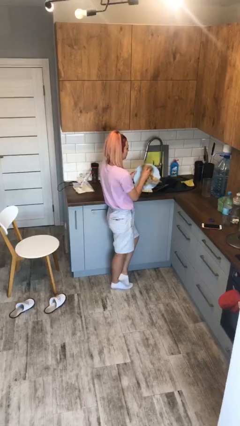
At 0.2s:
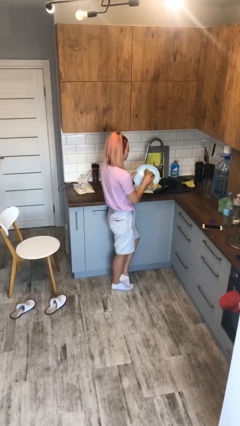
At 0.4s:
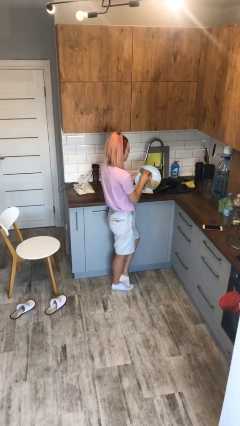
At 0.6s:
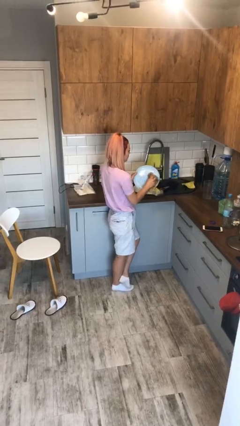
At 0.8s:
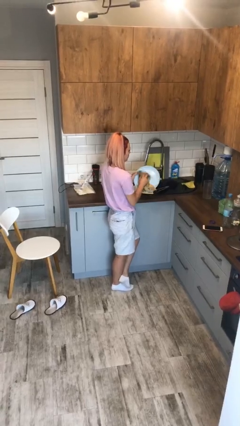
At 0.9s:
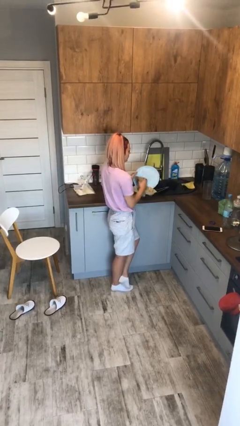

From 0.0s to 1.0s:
person dries dish

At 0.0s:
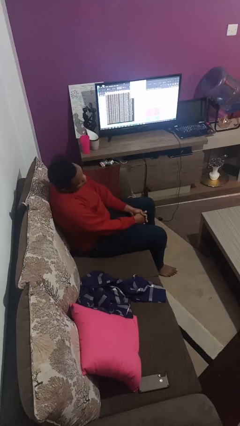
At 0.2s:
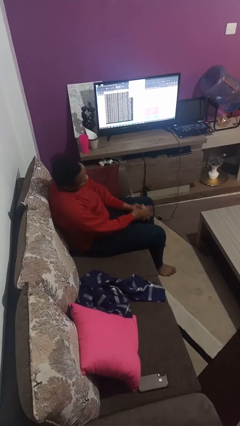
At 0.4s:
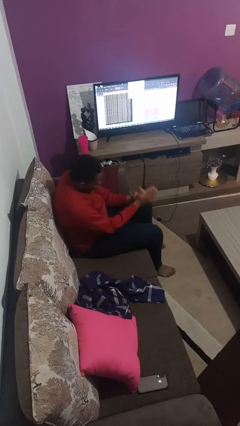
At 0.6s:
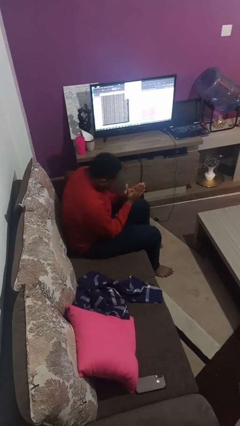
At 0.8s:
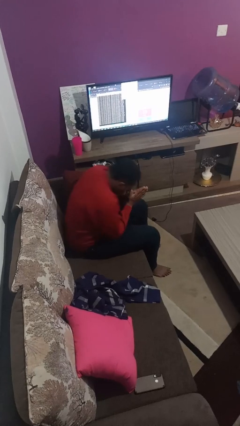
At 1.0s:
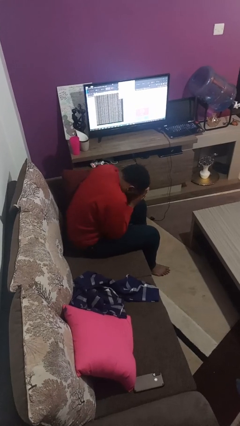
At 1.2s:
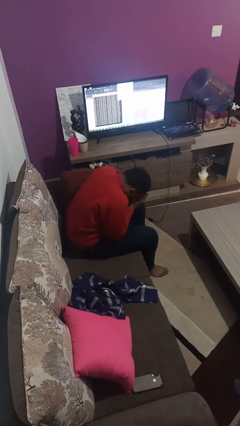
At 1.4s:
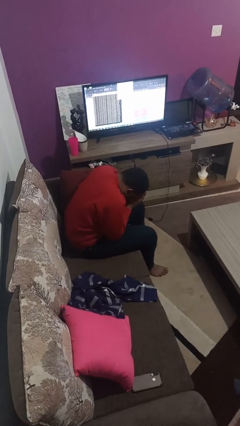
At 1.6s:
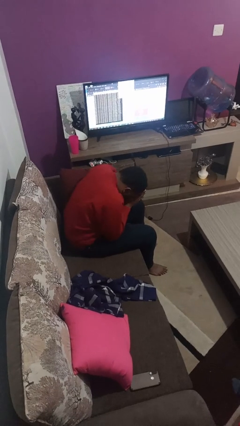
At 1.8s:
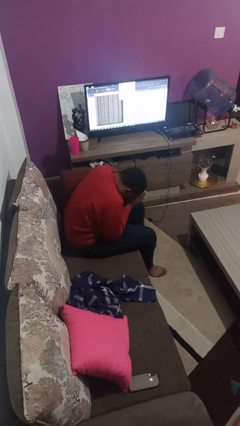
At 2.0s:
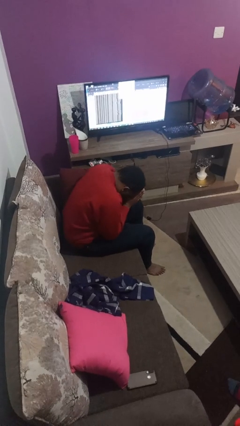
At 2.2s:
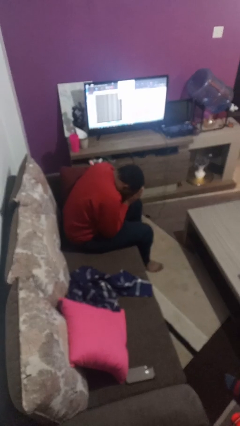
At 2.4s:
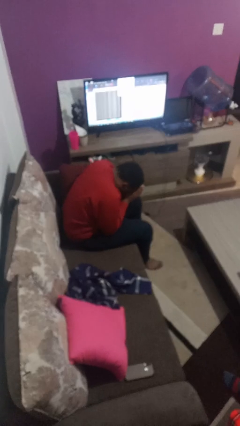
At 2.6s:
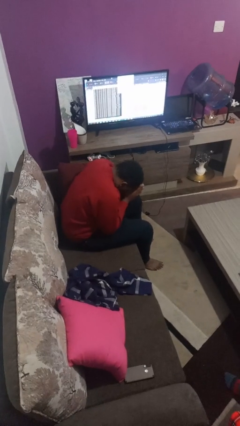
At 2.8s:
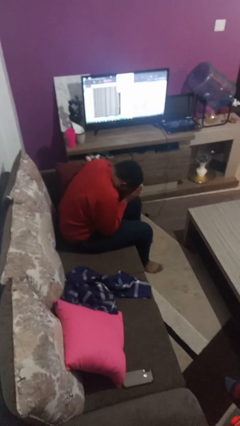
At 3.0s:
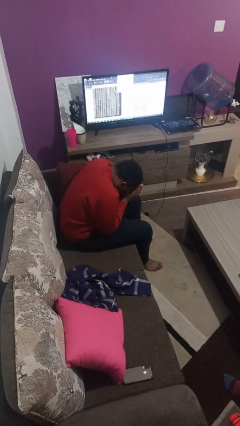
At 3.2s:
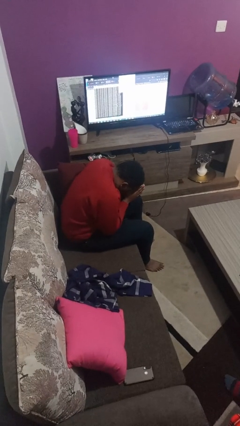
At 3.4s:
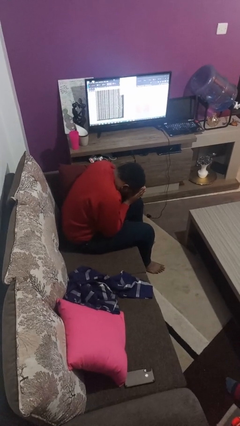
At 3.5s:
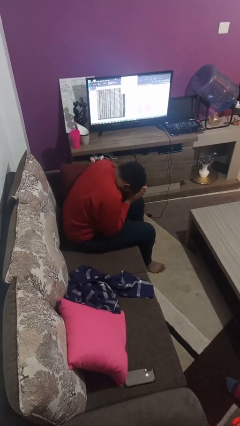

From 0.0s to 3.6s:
person prays

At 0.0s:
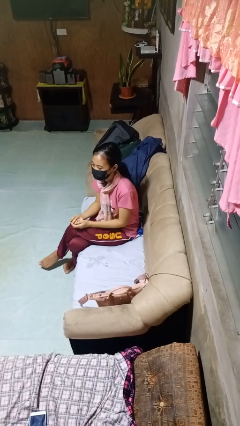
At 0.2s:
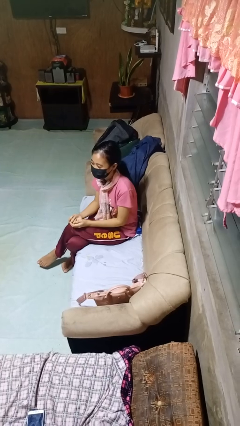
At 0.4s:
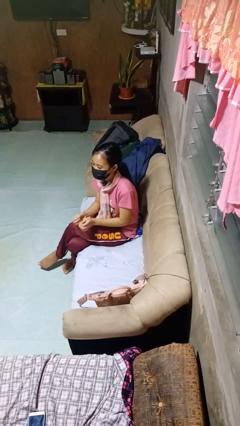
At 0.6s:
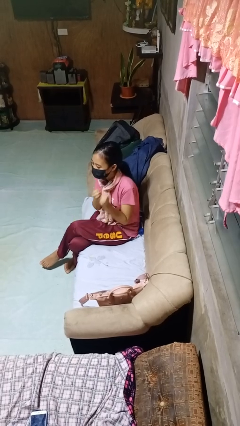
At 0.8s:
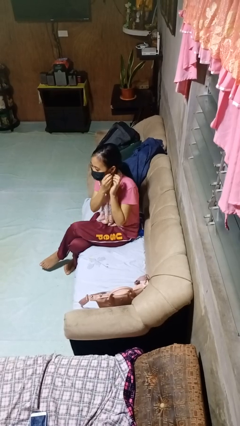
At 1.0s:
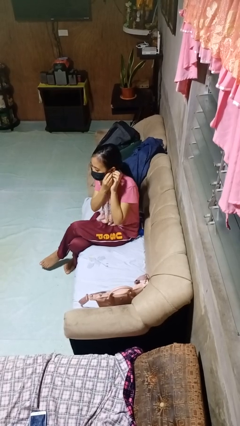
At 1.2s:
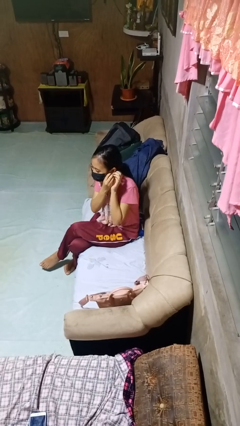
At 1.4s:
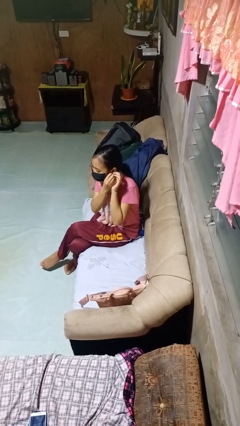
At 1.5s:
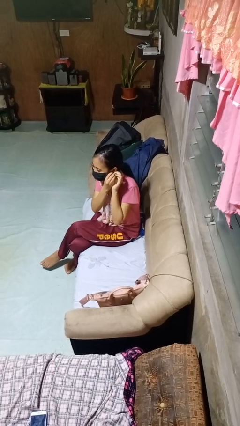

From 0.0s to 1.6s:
person takes off earrings

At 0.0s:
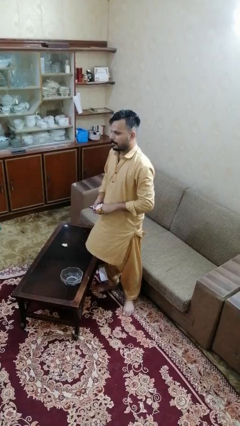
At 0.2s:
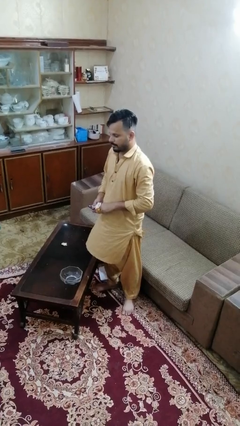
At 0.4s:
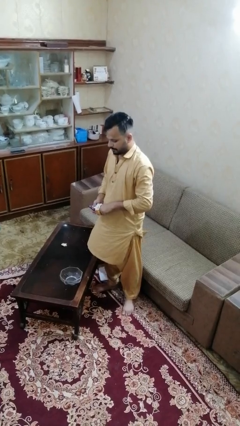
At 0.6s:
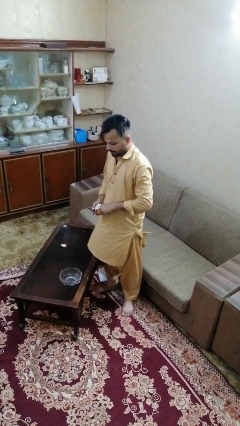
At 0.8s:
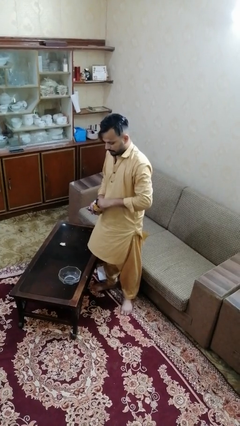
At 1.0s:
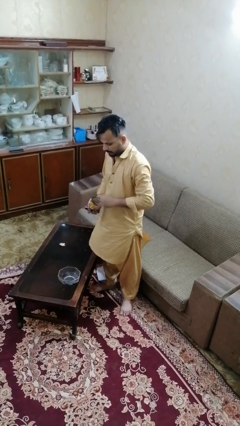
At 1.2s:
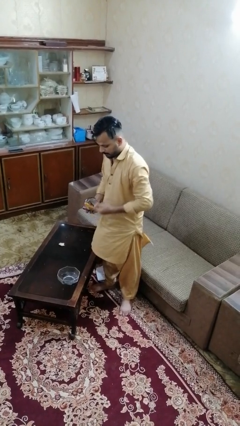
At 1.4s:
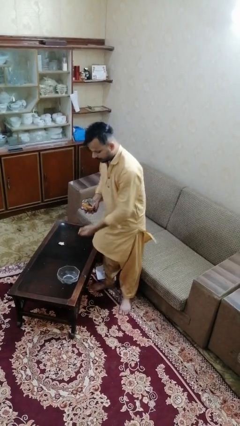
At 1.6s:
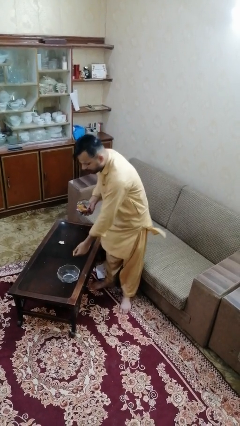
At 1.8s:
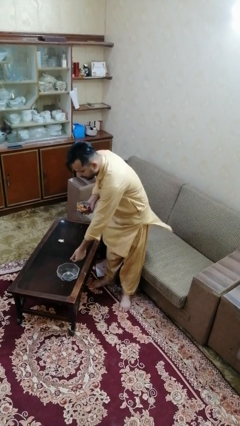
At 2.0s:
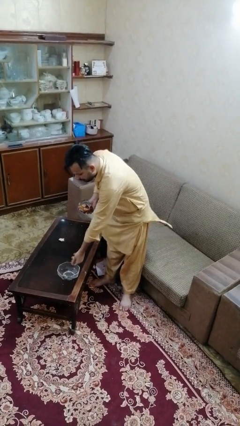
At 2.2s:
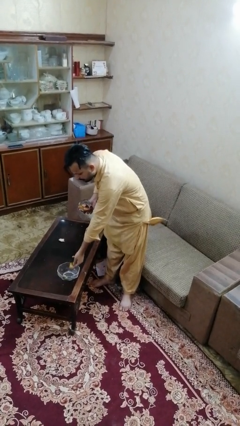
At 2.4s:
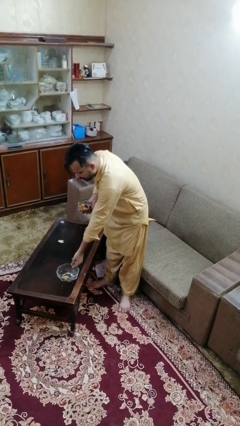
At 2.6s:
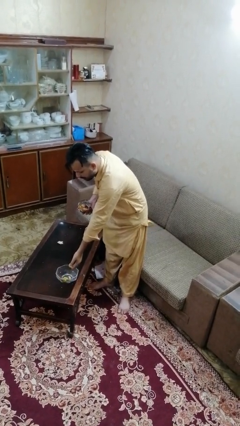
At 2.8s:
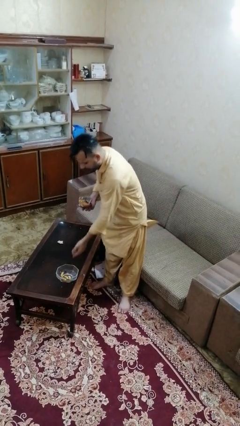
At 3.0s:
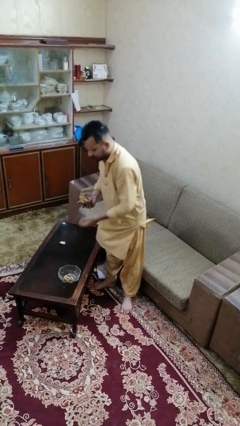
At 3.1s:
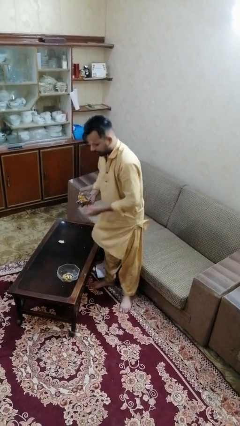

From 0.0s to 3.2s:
person pours into bowl

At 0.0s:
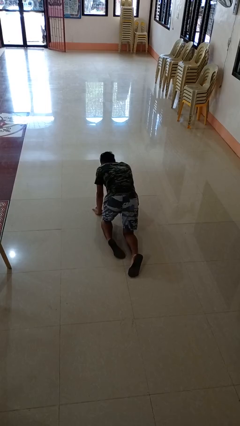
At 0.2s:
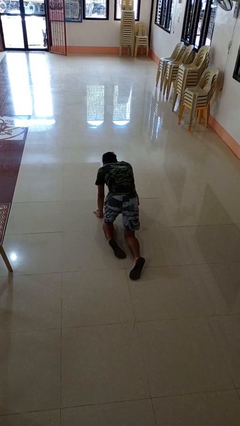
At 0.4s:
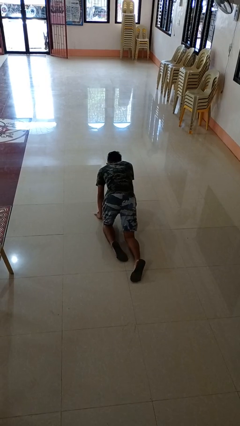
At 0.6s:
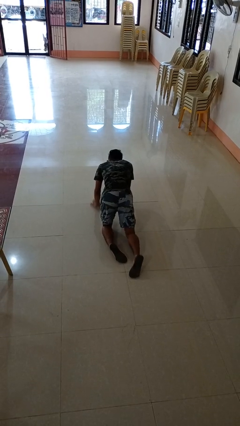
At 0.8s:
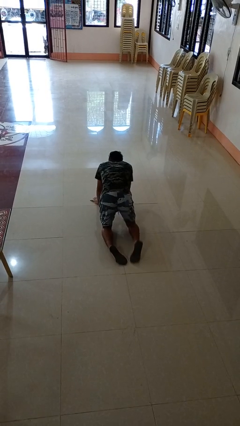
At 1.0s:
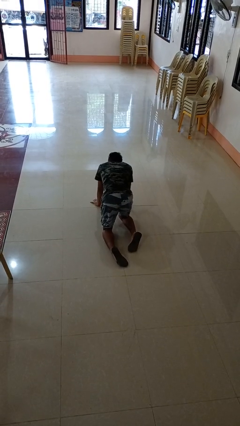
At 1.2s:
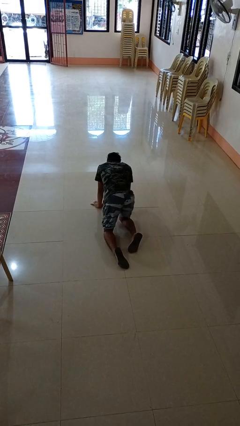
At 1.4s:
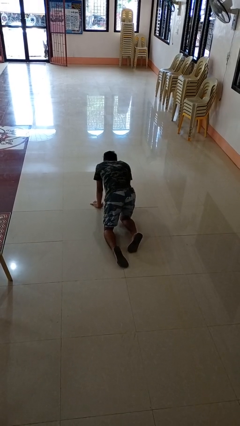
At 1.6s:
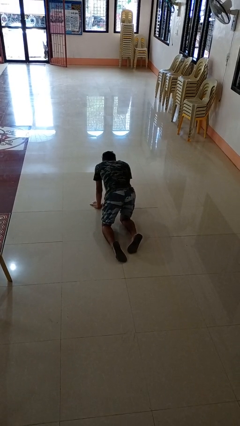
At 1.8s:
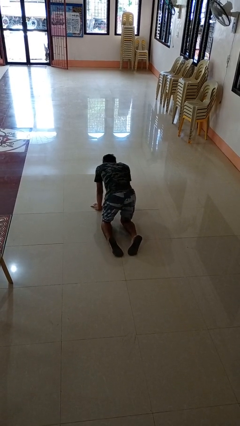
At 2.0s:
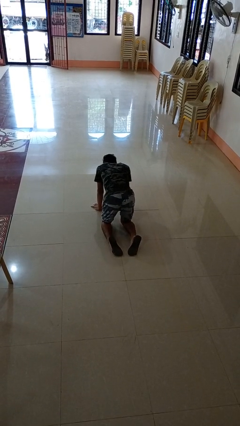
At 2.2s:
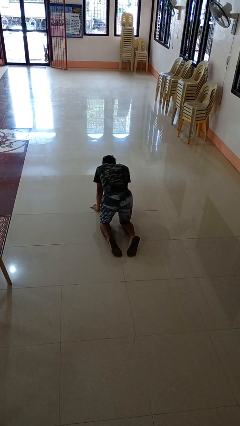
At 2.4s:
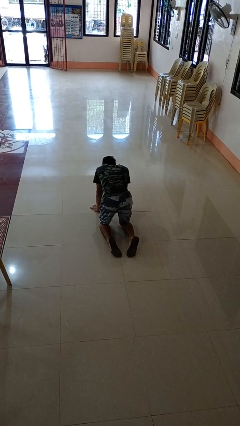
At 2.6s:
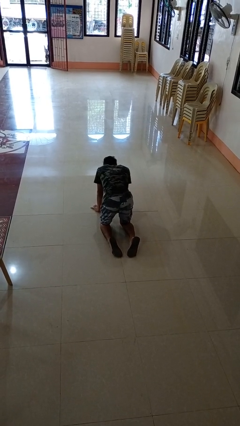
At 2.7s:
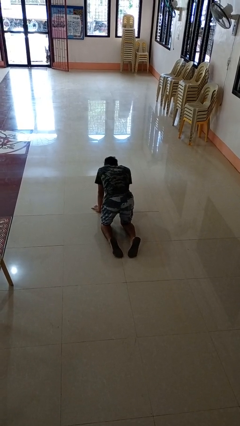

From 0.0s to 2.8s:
person crawls

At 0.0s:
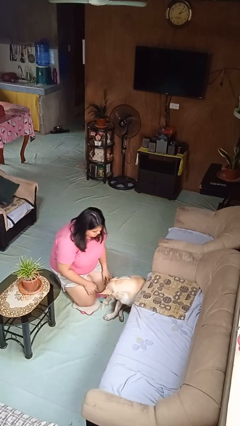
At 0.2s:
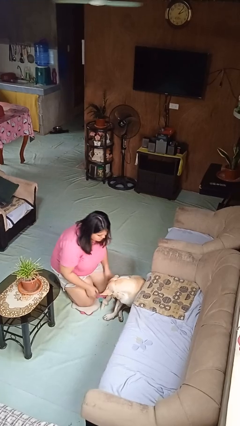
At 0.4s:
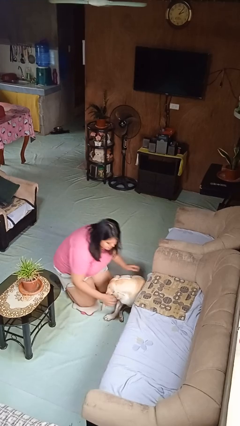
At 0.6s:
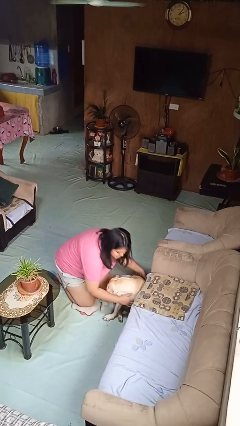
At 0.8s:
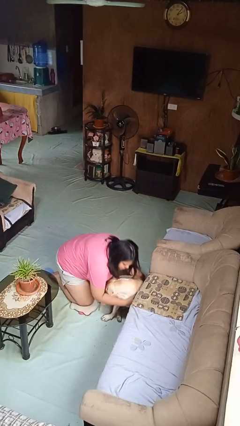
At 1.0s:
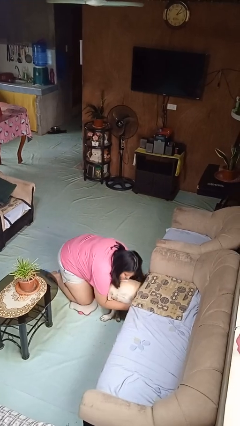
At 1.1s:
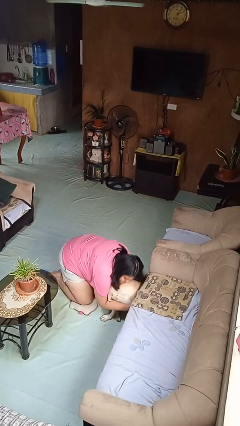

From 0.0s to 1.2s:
person hugs dog

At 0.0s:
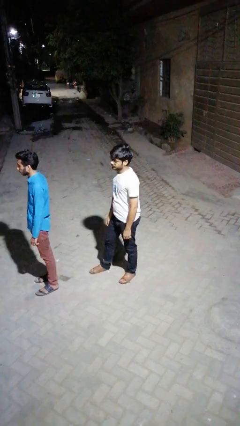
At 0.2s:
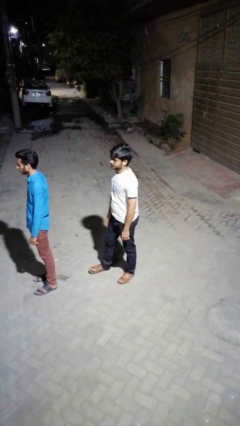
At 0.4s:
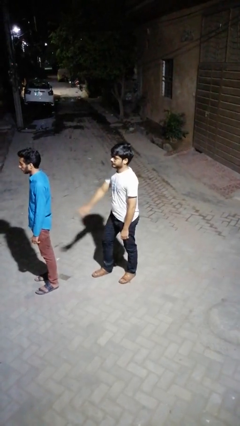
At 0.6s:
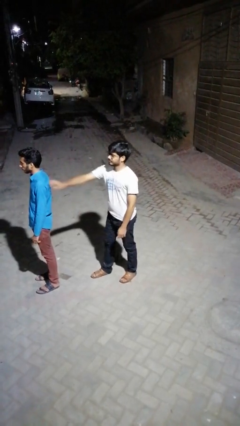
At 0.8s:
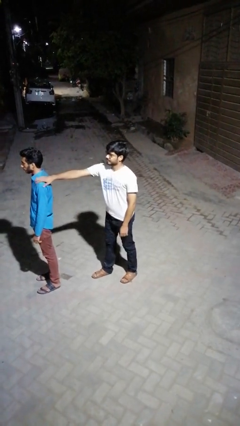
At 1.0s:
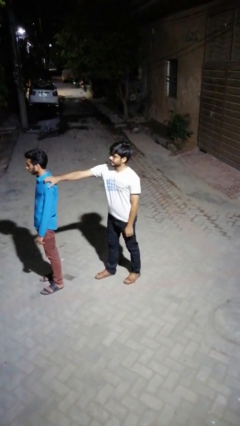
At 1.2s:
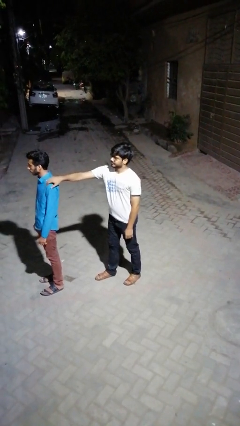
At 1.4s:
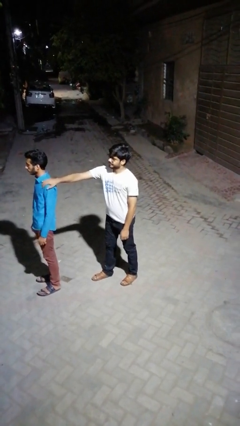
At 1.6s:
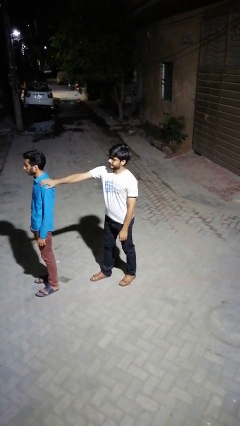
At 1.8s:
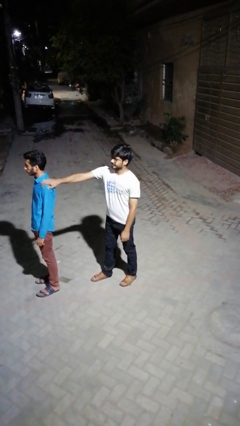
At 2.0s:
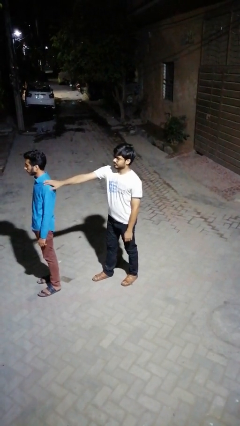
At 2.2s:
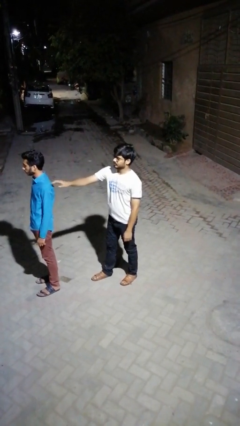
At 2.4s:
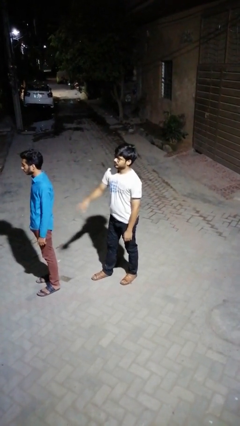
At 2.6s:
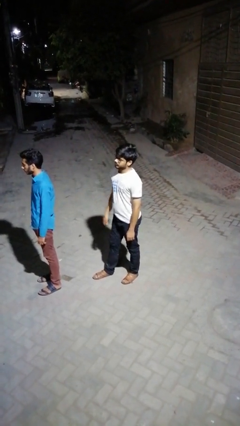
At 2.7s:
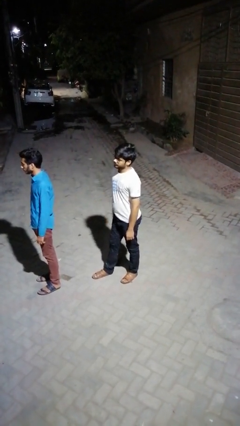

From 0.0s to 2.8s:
person touches back of person

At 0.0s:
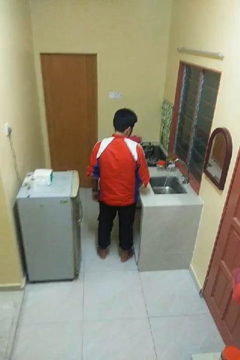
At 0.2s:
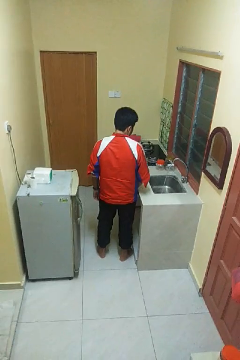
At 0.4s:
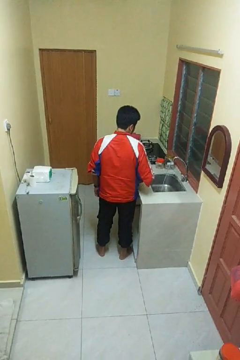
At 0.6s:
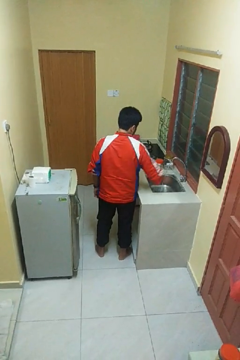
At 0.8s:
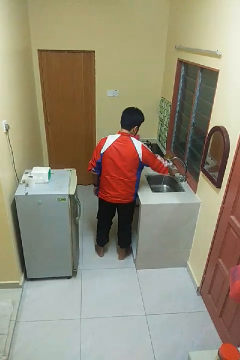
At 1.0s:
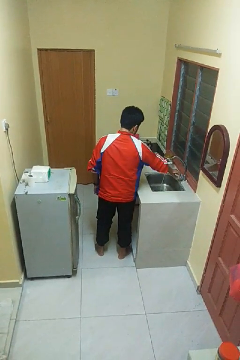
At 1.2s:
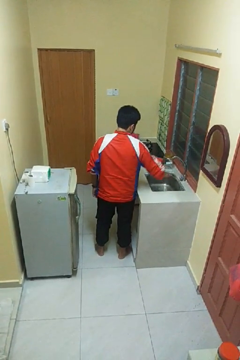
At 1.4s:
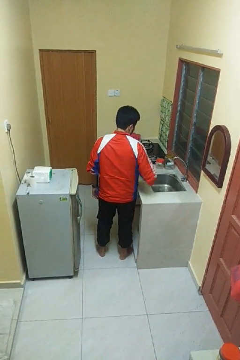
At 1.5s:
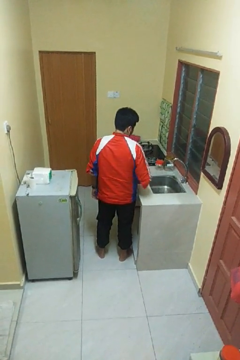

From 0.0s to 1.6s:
person turns off faucet
